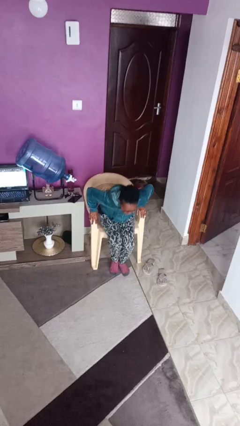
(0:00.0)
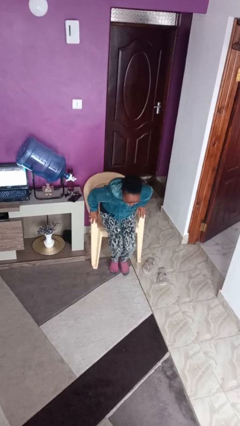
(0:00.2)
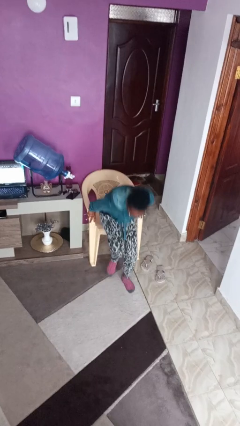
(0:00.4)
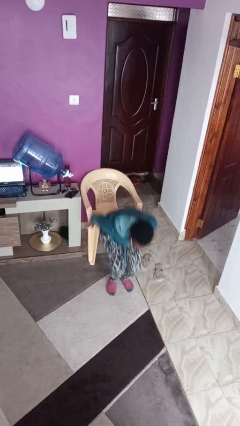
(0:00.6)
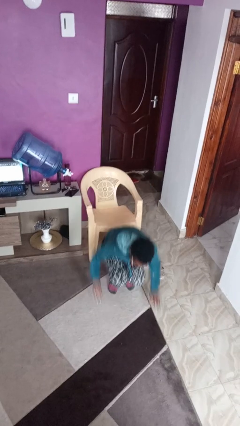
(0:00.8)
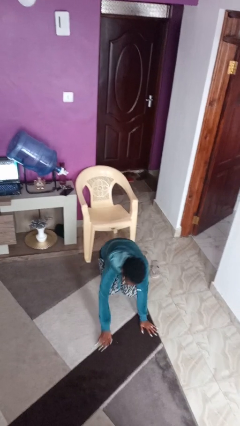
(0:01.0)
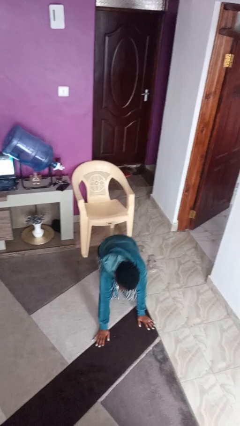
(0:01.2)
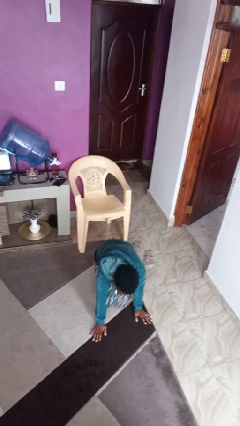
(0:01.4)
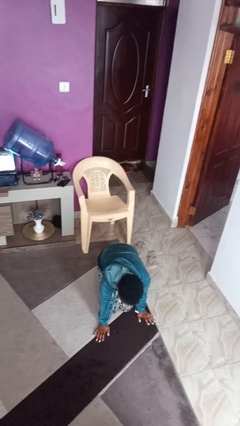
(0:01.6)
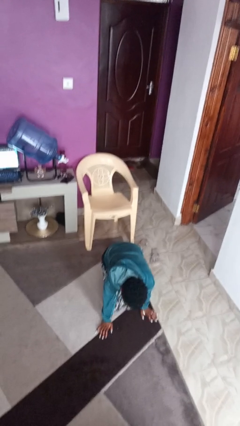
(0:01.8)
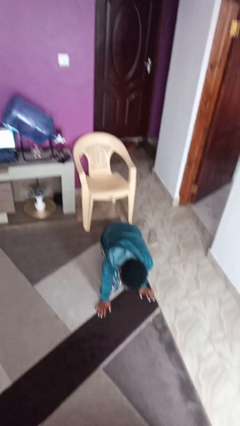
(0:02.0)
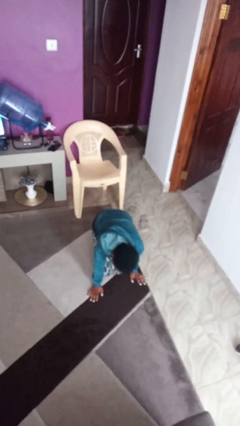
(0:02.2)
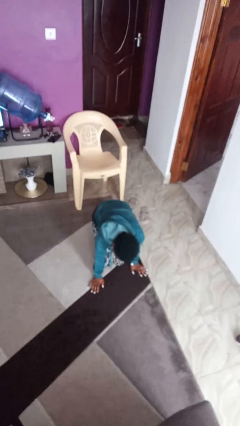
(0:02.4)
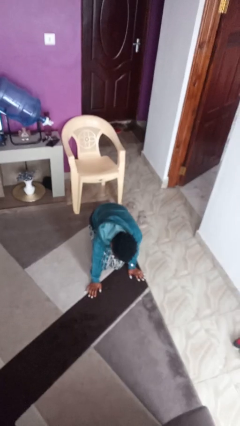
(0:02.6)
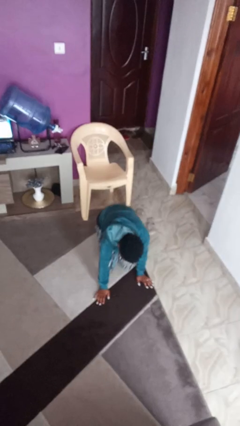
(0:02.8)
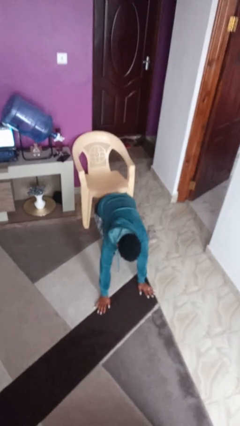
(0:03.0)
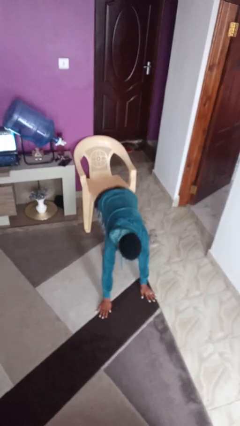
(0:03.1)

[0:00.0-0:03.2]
person falls from chair

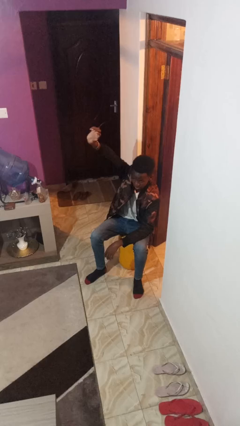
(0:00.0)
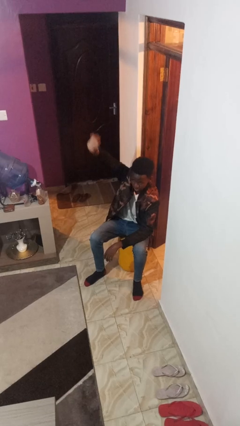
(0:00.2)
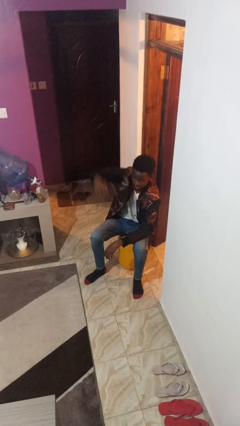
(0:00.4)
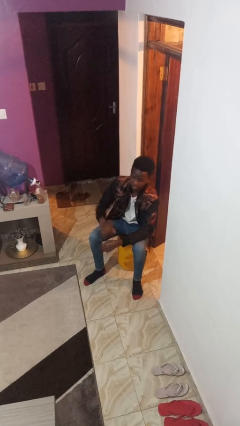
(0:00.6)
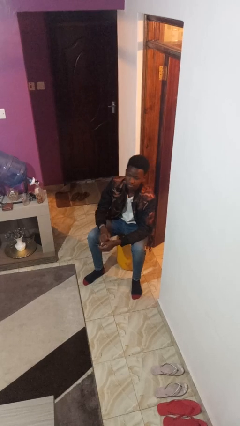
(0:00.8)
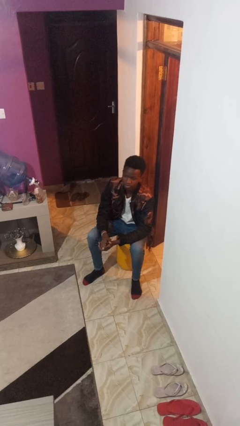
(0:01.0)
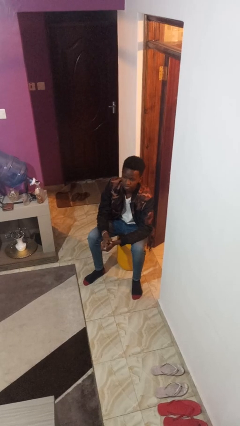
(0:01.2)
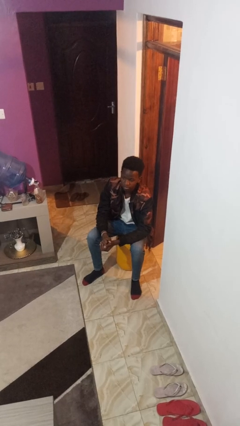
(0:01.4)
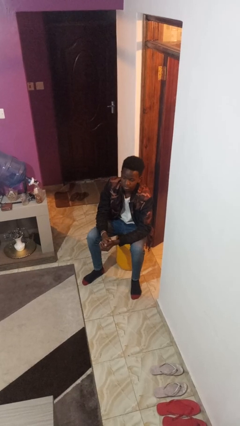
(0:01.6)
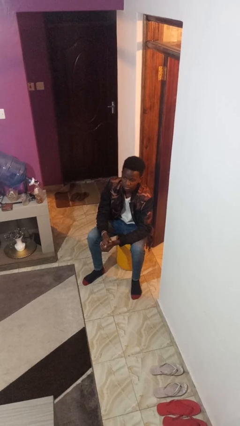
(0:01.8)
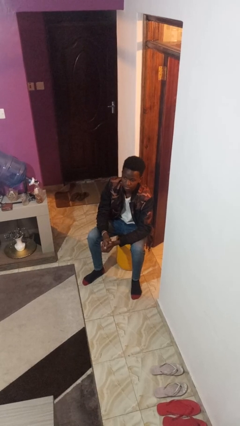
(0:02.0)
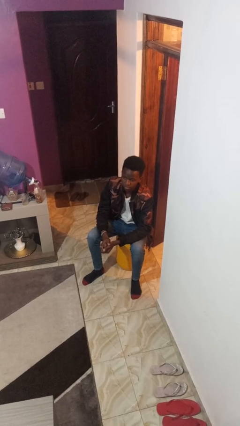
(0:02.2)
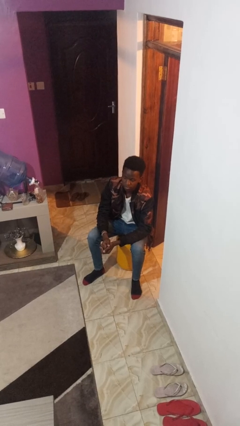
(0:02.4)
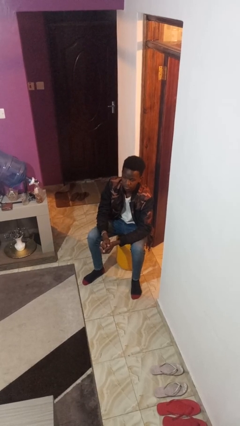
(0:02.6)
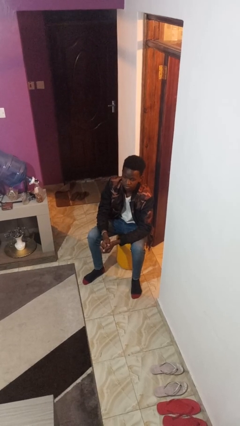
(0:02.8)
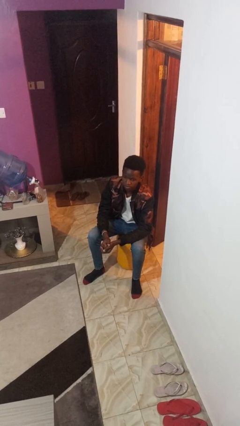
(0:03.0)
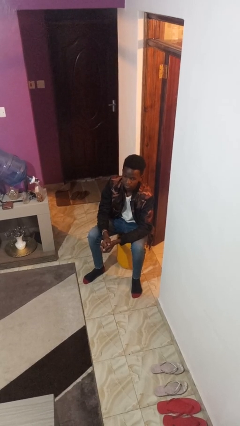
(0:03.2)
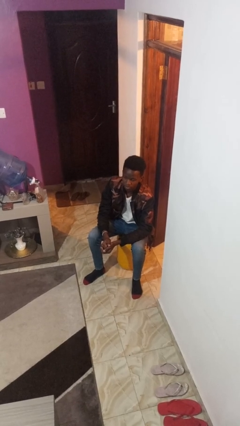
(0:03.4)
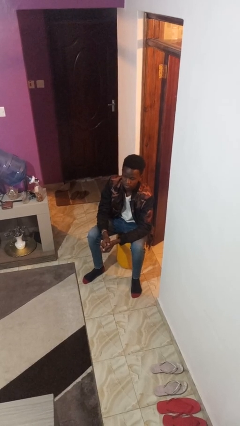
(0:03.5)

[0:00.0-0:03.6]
person gestures lower hand

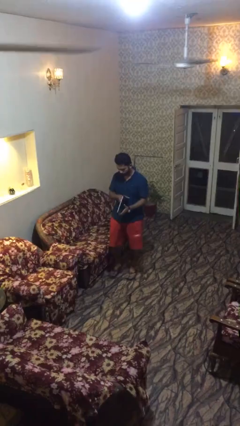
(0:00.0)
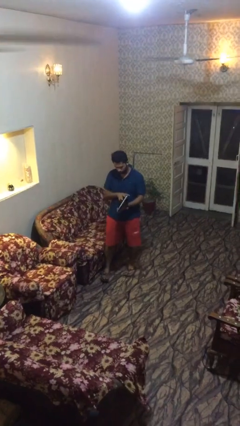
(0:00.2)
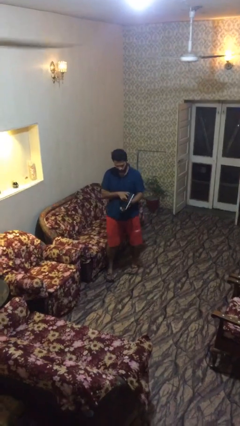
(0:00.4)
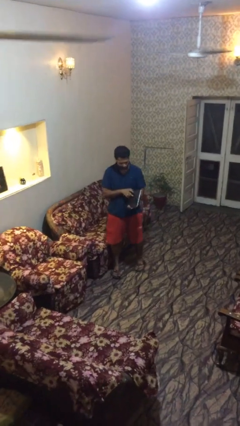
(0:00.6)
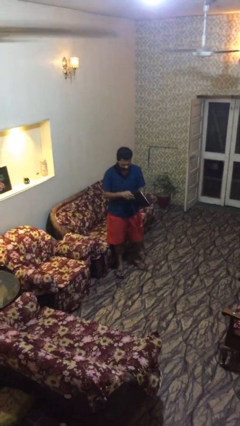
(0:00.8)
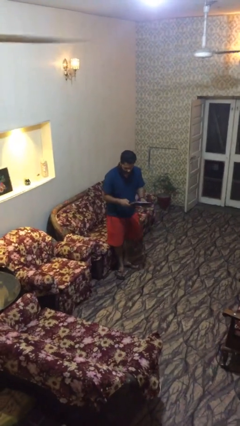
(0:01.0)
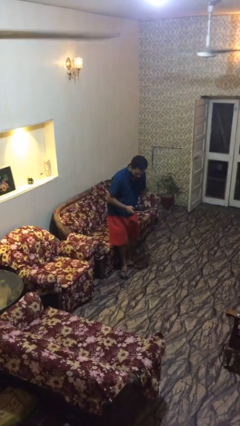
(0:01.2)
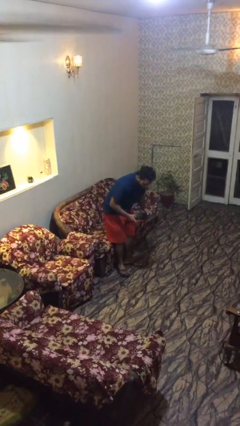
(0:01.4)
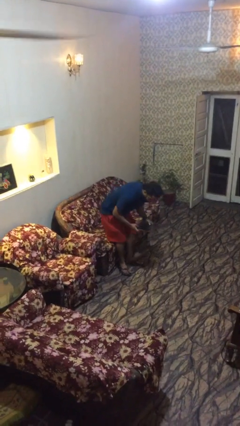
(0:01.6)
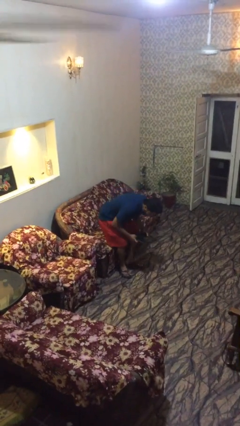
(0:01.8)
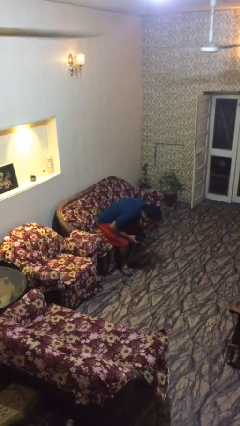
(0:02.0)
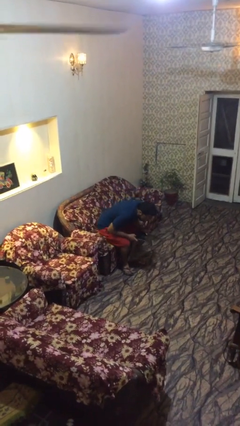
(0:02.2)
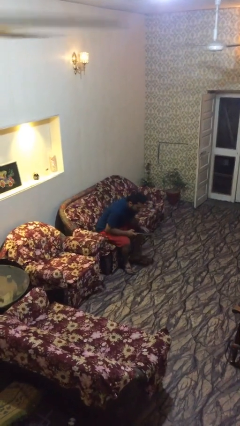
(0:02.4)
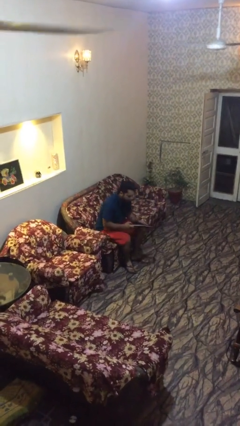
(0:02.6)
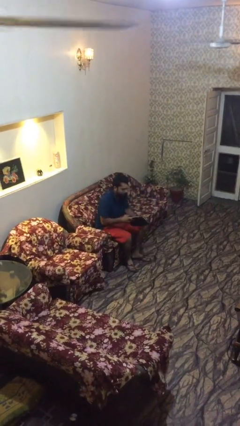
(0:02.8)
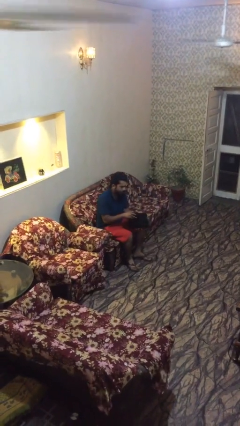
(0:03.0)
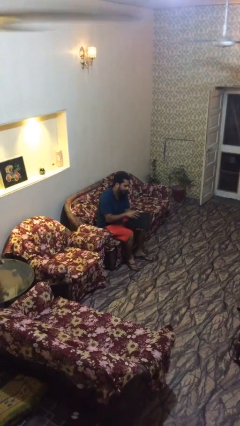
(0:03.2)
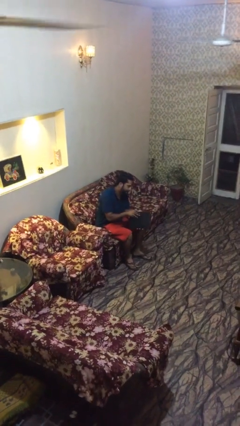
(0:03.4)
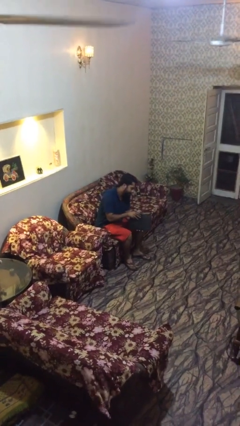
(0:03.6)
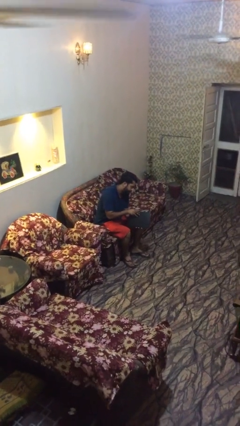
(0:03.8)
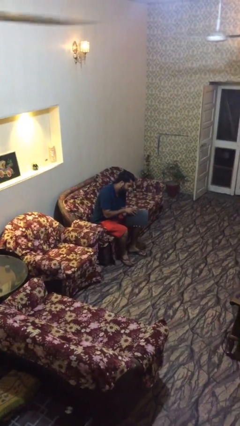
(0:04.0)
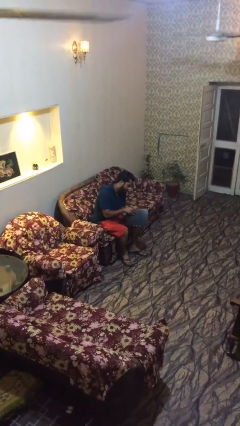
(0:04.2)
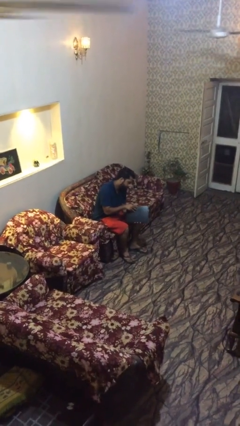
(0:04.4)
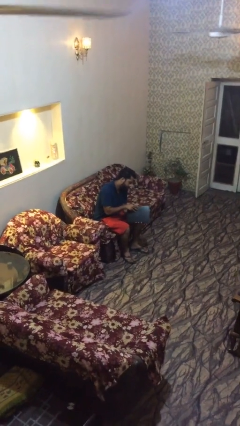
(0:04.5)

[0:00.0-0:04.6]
person sits down

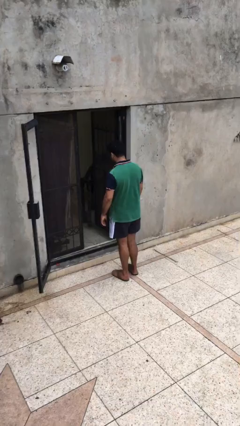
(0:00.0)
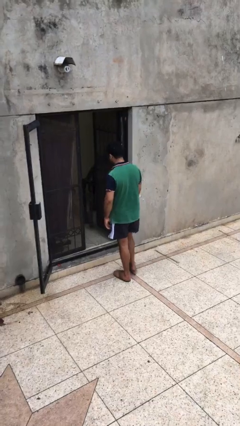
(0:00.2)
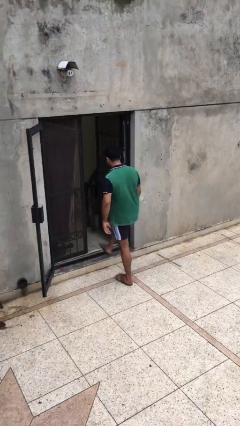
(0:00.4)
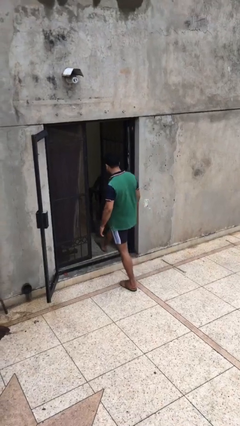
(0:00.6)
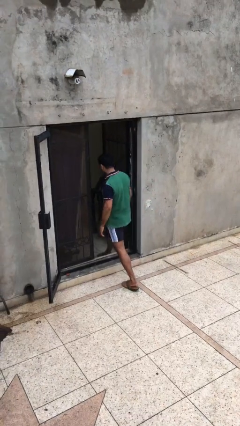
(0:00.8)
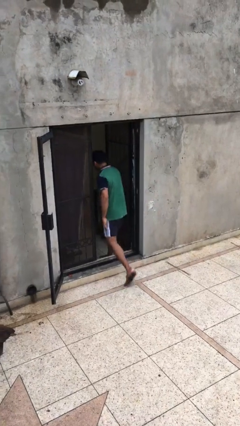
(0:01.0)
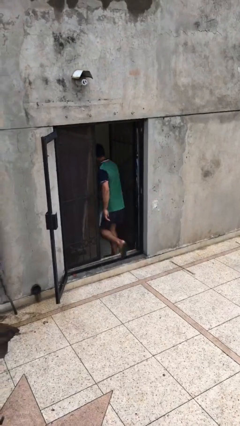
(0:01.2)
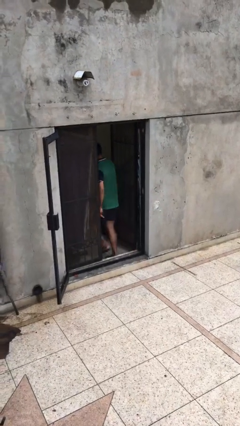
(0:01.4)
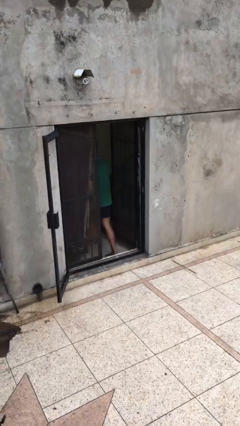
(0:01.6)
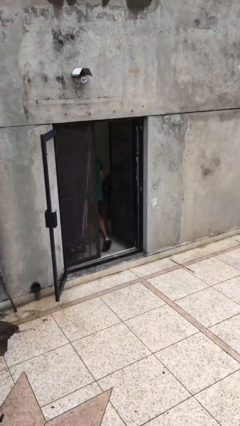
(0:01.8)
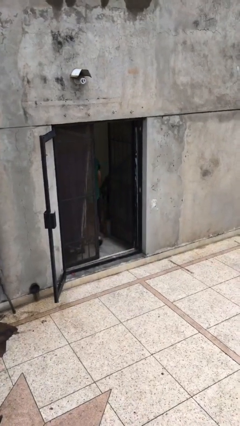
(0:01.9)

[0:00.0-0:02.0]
person exits scene through structure

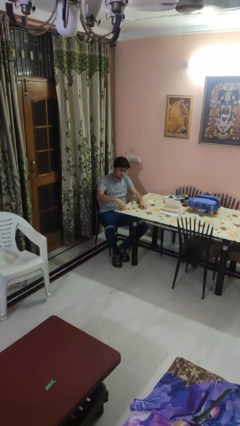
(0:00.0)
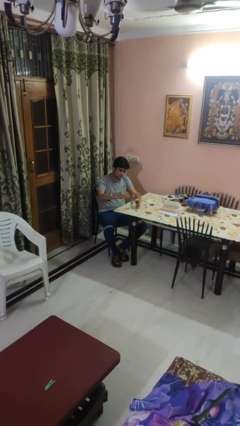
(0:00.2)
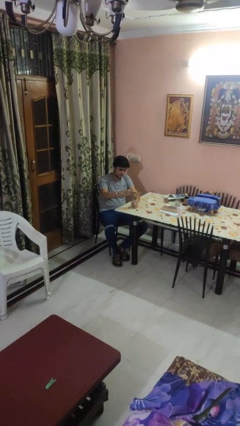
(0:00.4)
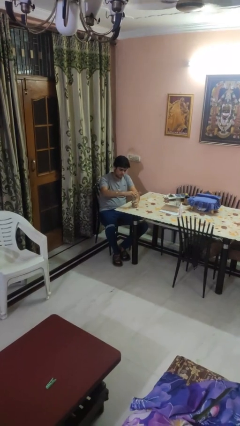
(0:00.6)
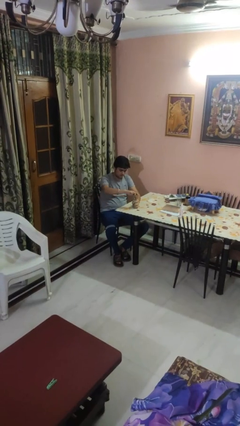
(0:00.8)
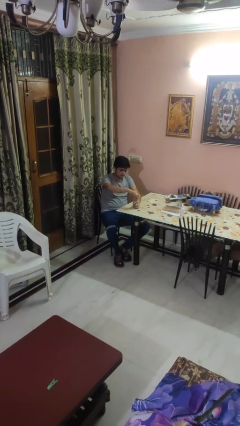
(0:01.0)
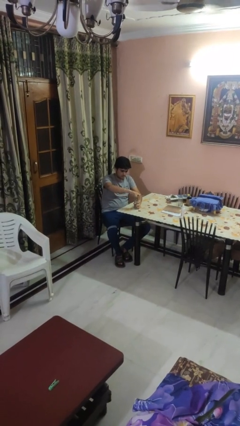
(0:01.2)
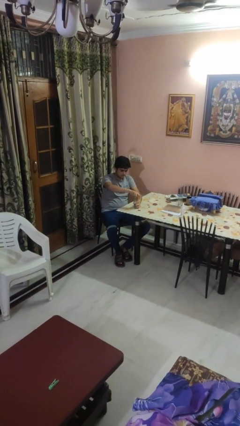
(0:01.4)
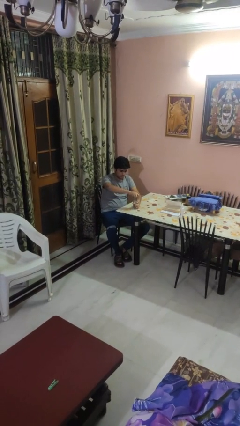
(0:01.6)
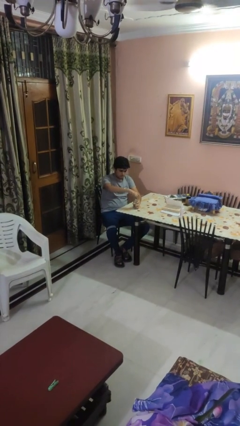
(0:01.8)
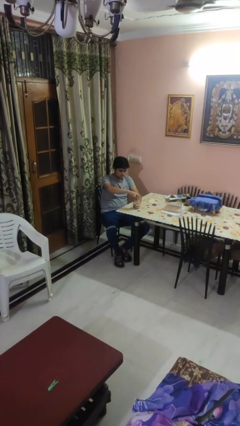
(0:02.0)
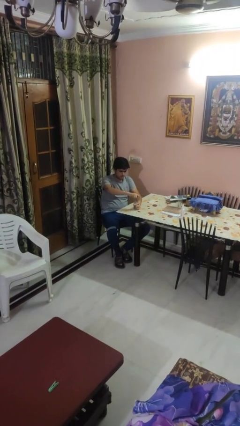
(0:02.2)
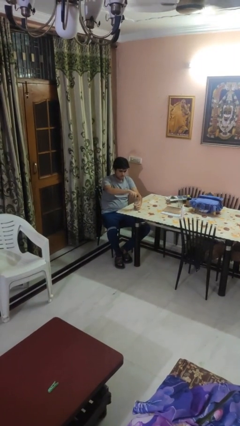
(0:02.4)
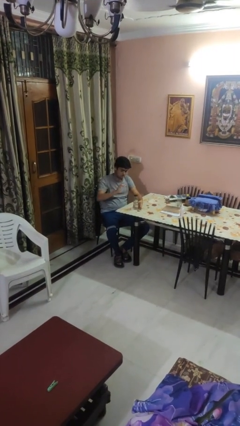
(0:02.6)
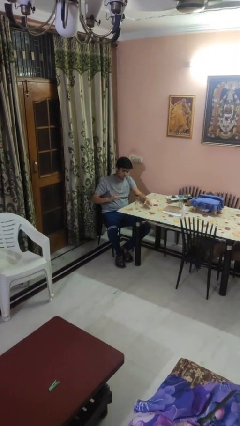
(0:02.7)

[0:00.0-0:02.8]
person screws lid to bottle

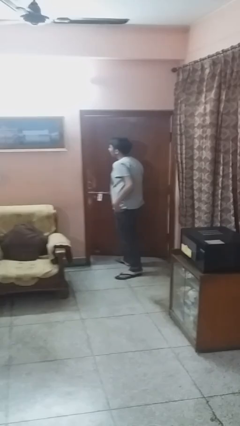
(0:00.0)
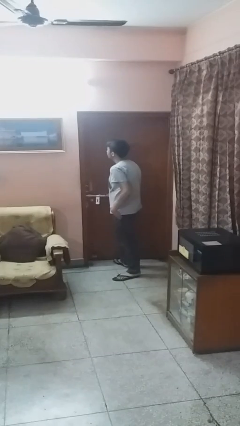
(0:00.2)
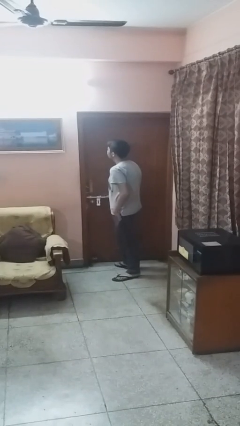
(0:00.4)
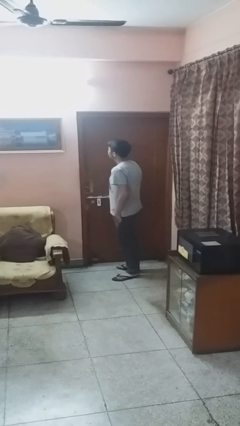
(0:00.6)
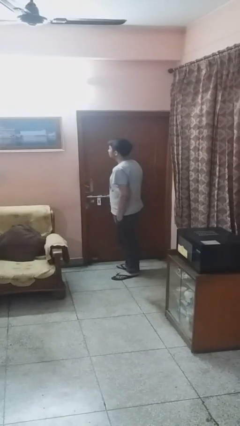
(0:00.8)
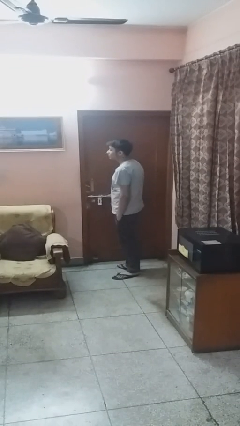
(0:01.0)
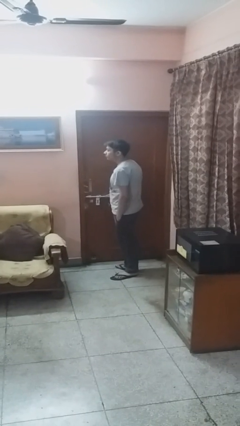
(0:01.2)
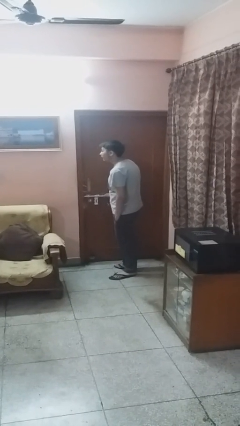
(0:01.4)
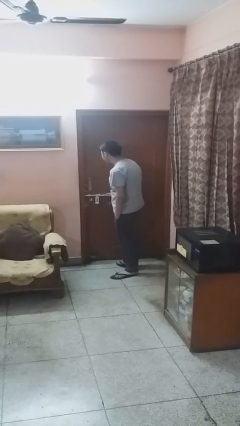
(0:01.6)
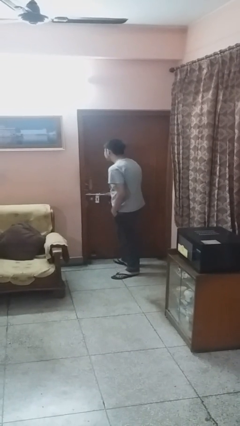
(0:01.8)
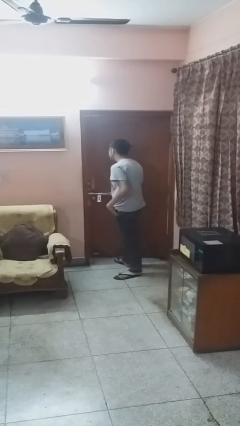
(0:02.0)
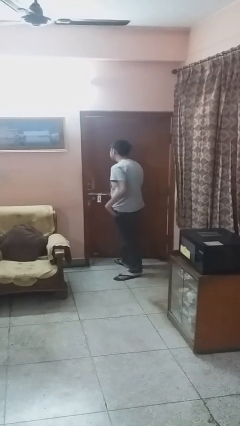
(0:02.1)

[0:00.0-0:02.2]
person closes facility door
